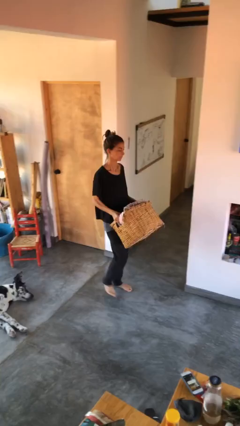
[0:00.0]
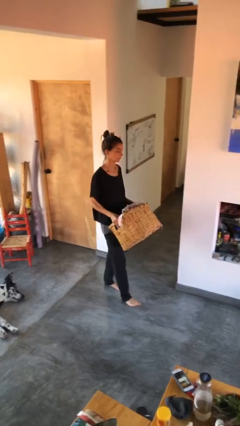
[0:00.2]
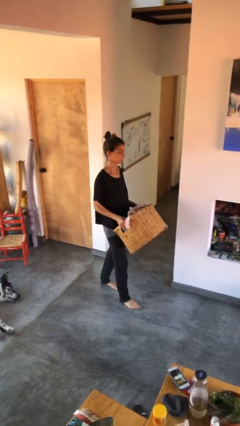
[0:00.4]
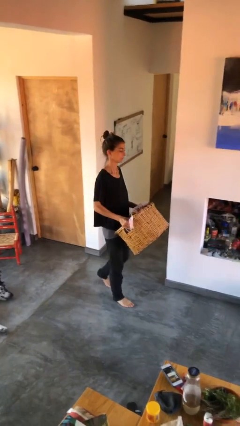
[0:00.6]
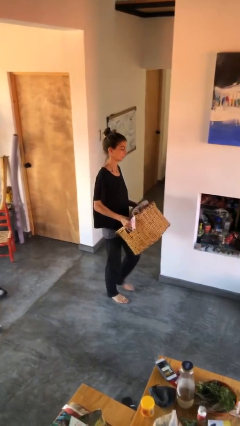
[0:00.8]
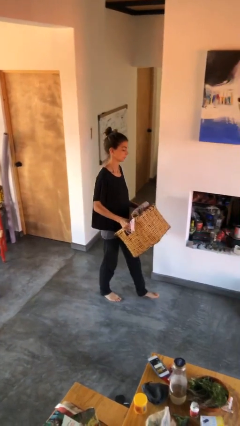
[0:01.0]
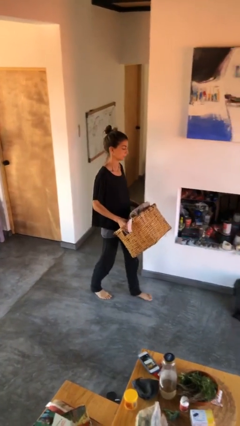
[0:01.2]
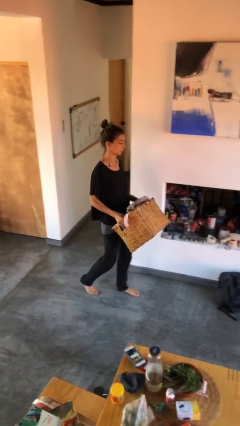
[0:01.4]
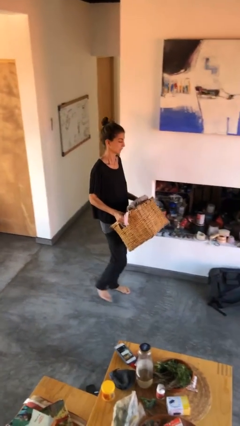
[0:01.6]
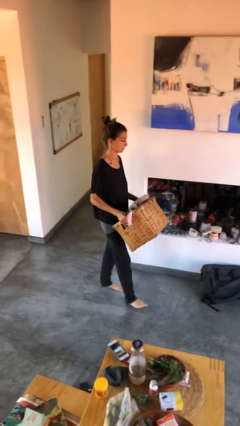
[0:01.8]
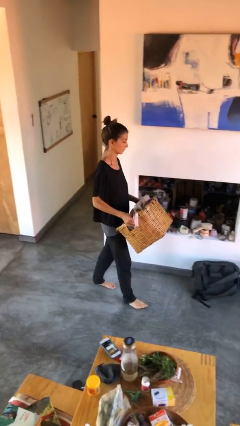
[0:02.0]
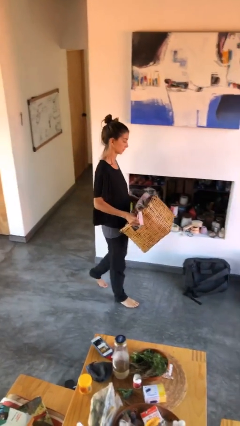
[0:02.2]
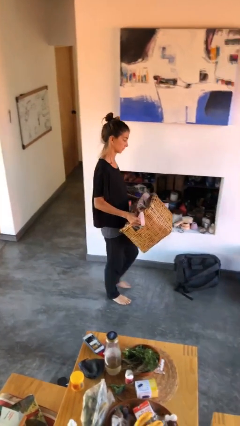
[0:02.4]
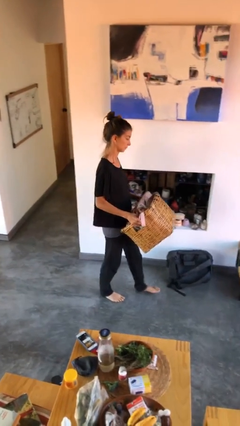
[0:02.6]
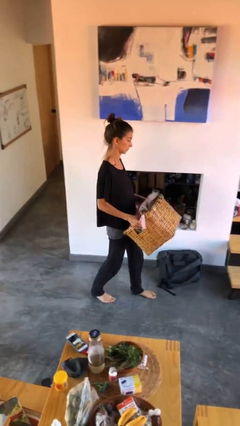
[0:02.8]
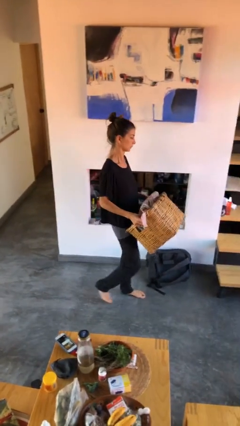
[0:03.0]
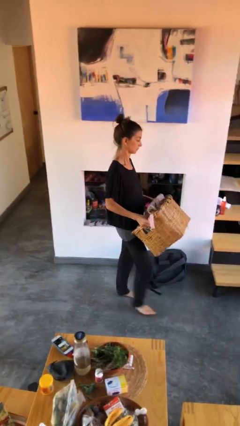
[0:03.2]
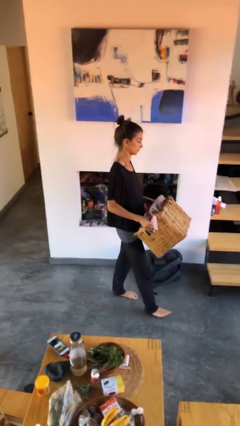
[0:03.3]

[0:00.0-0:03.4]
person carries laundry basket

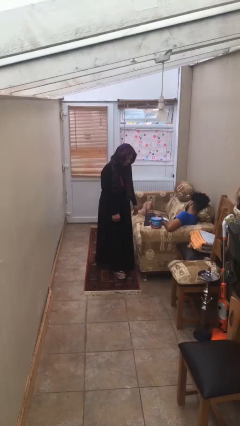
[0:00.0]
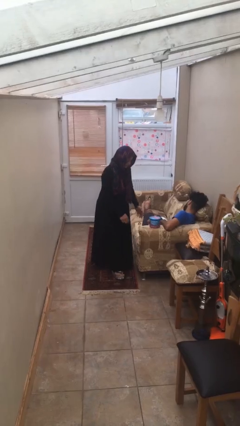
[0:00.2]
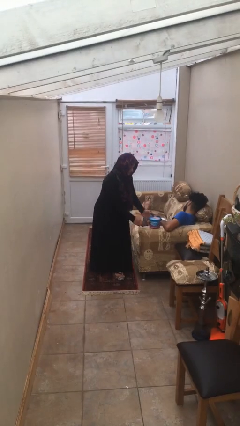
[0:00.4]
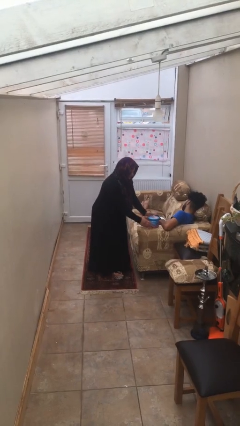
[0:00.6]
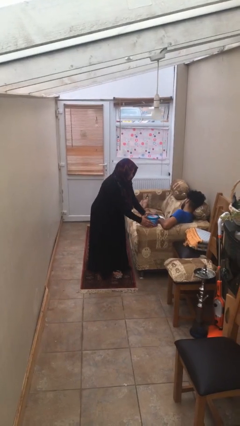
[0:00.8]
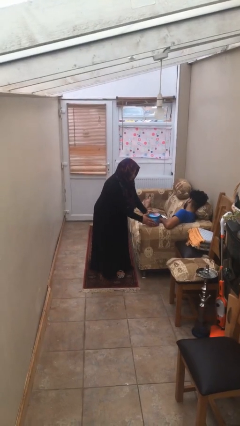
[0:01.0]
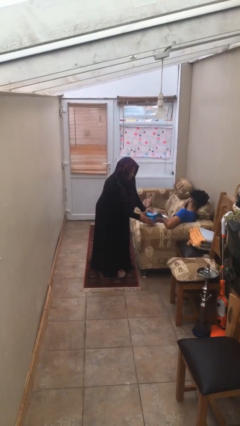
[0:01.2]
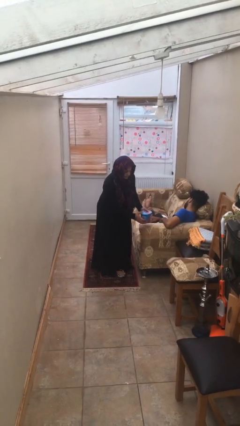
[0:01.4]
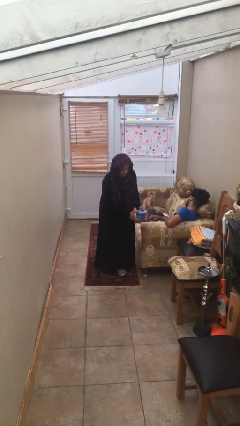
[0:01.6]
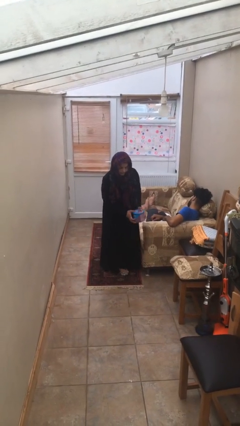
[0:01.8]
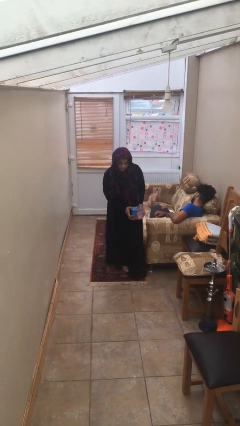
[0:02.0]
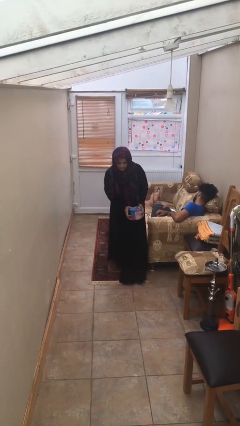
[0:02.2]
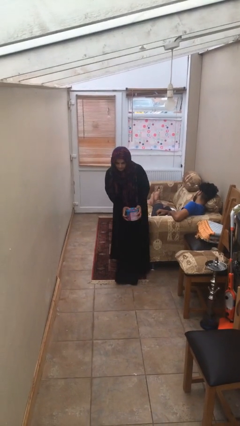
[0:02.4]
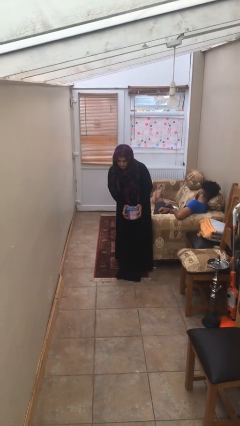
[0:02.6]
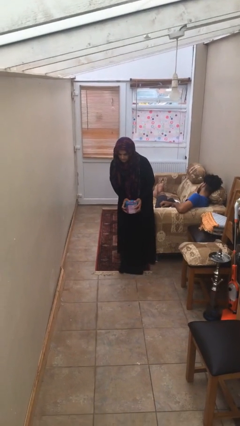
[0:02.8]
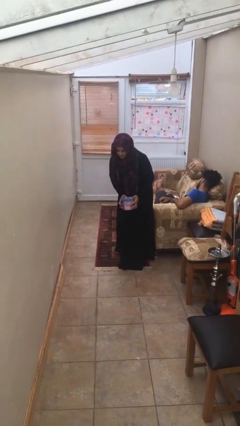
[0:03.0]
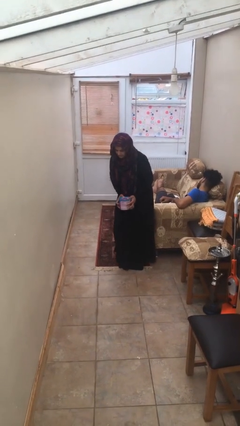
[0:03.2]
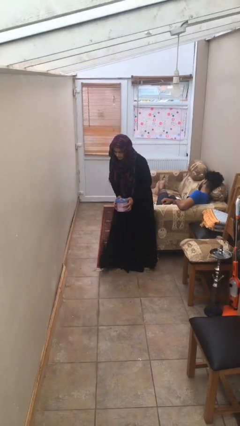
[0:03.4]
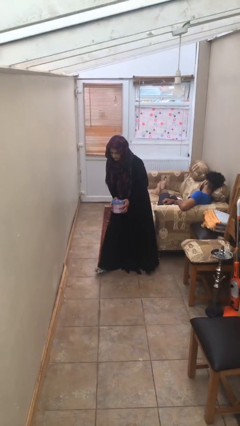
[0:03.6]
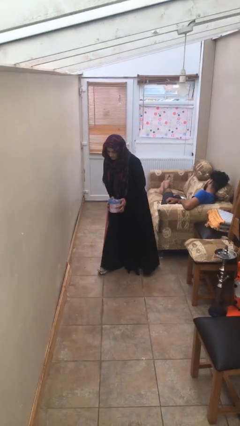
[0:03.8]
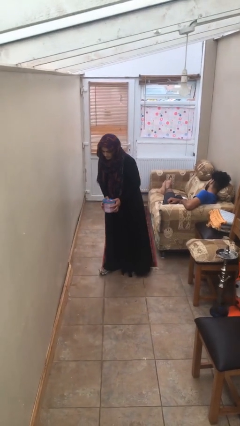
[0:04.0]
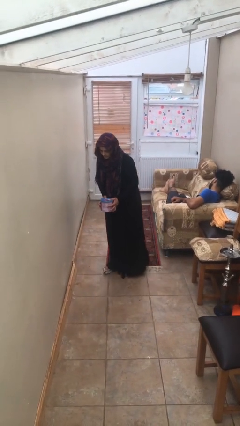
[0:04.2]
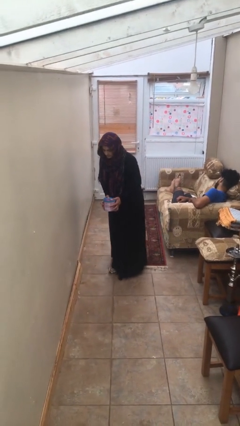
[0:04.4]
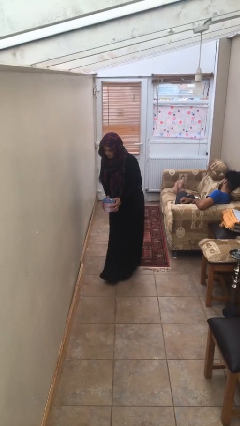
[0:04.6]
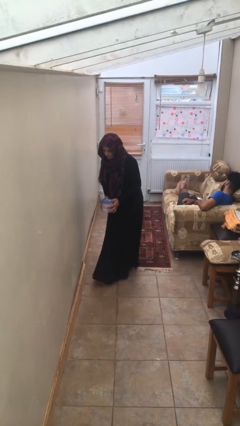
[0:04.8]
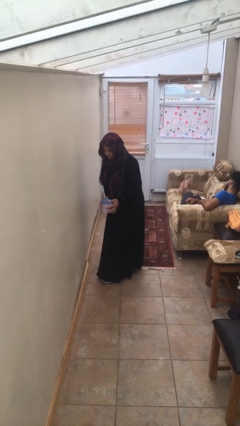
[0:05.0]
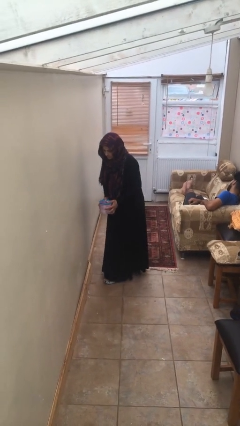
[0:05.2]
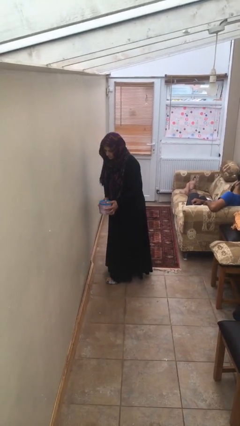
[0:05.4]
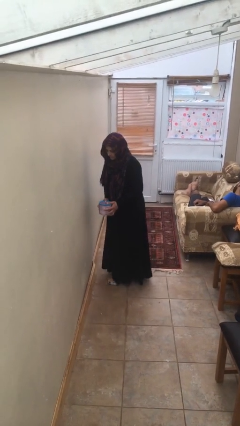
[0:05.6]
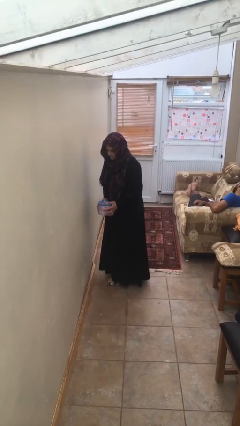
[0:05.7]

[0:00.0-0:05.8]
person steals object from person

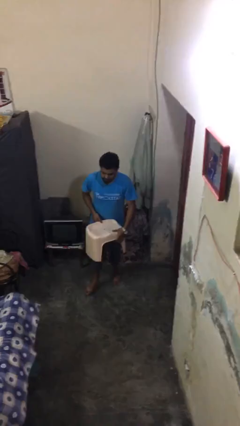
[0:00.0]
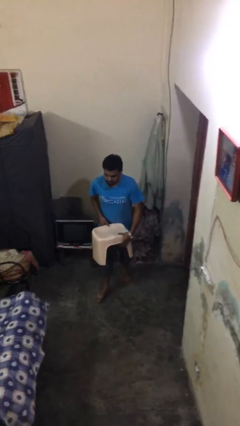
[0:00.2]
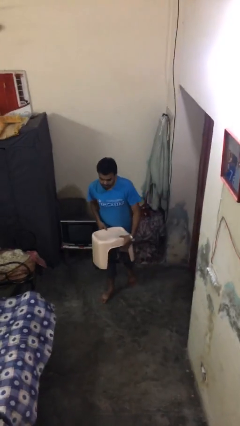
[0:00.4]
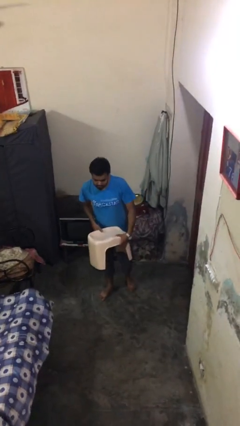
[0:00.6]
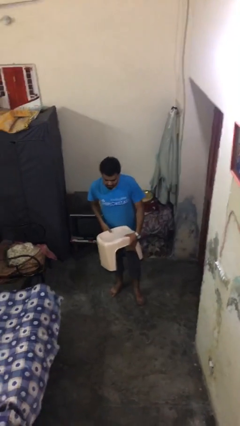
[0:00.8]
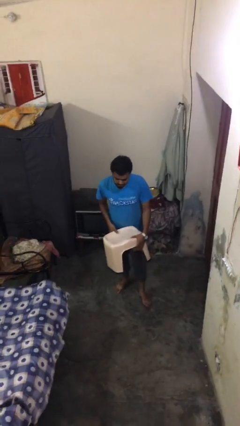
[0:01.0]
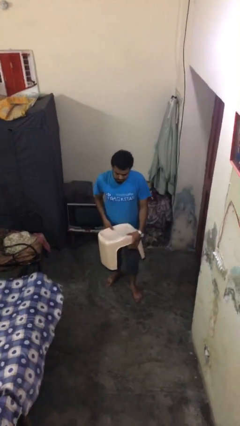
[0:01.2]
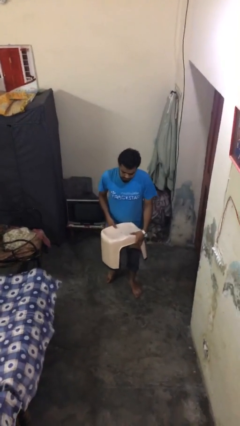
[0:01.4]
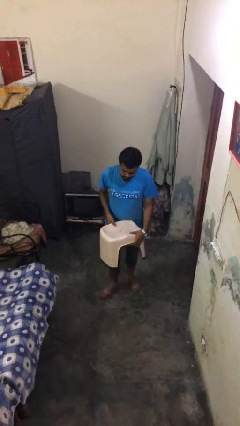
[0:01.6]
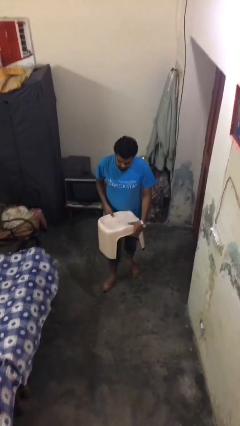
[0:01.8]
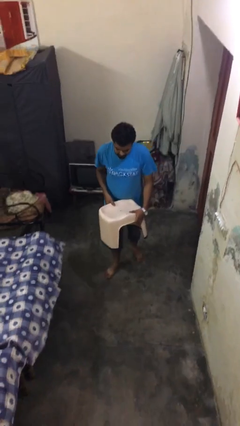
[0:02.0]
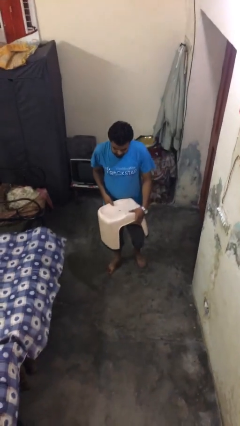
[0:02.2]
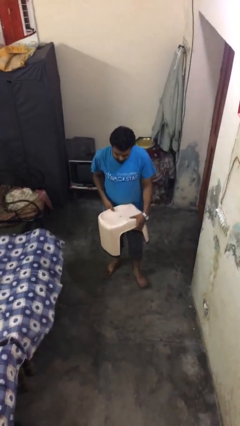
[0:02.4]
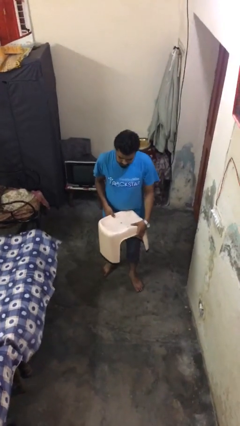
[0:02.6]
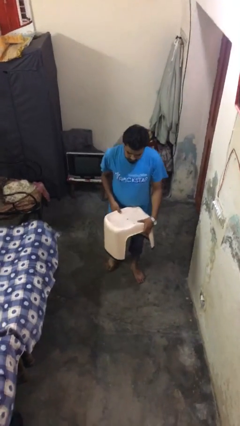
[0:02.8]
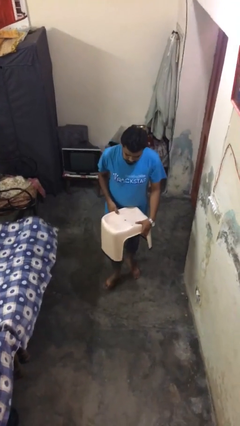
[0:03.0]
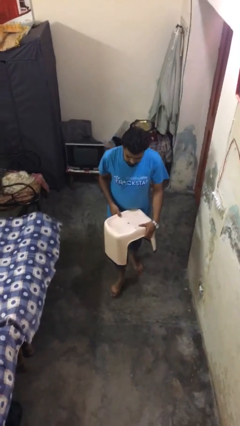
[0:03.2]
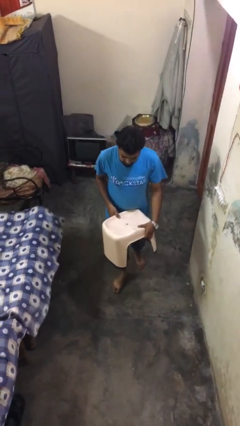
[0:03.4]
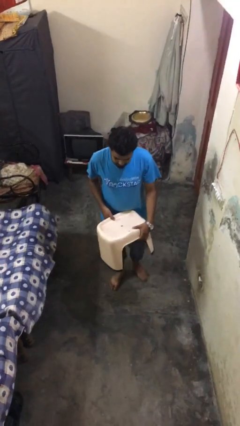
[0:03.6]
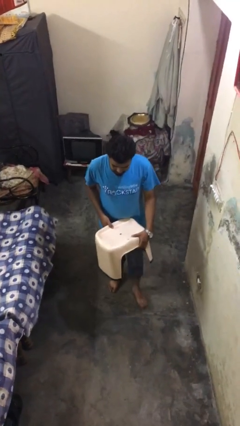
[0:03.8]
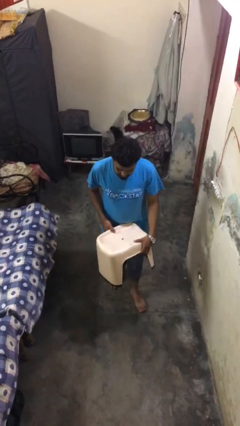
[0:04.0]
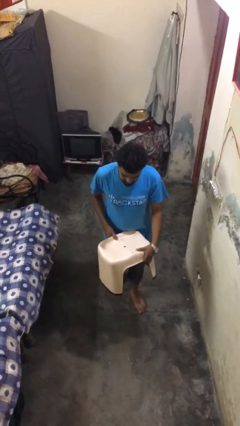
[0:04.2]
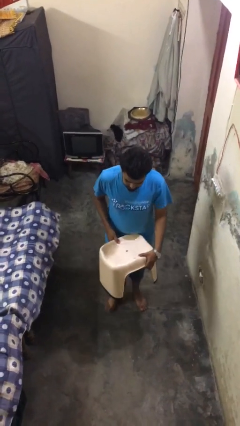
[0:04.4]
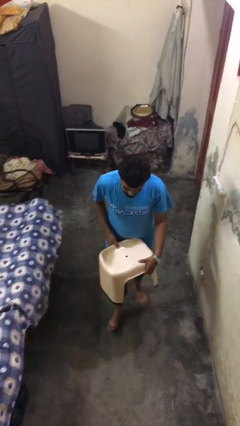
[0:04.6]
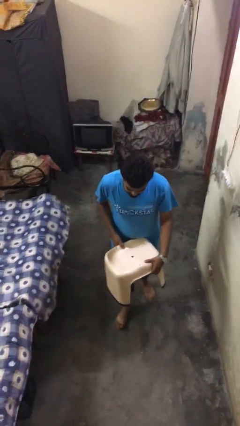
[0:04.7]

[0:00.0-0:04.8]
person carries heavy object

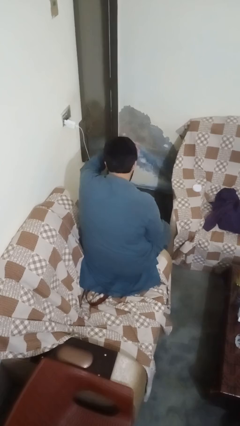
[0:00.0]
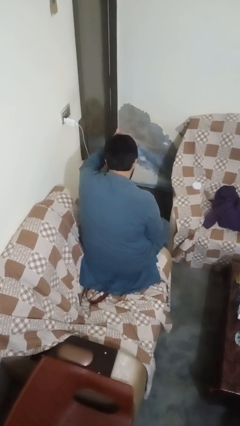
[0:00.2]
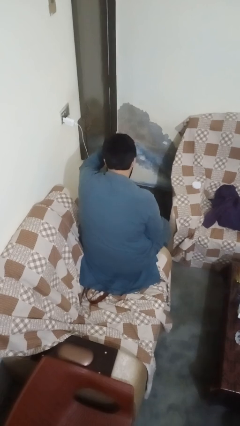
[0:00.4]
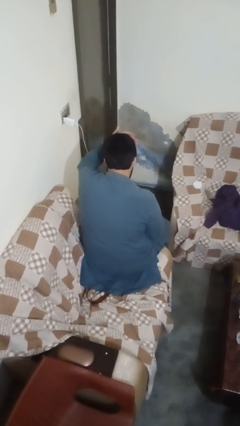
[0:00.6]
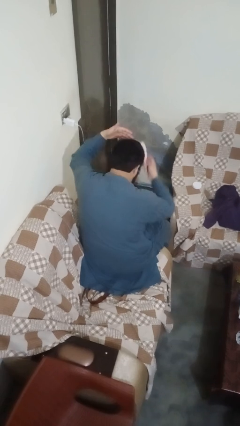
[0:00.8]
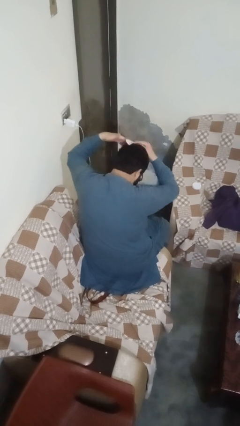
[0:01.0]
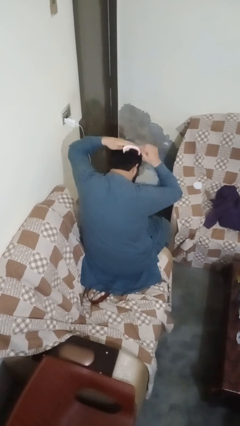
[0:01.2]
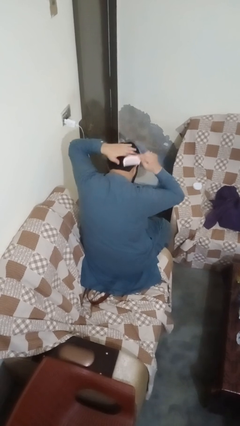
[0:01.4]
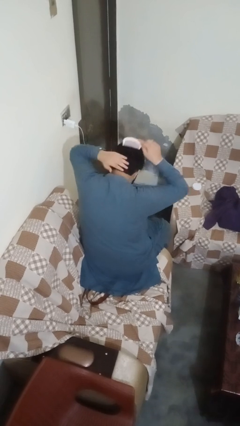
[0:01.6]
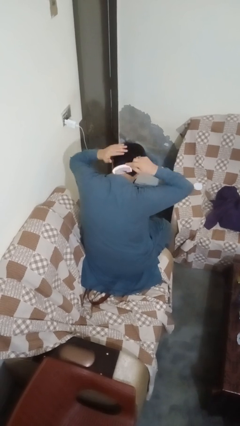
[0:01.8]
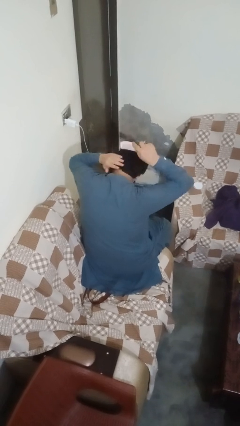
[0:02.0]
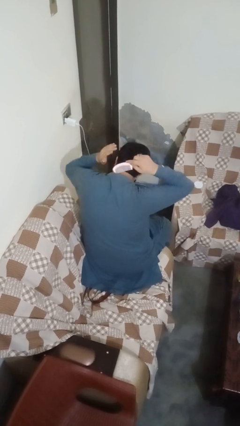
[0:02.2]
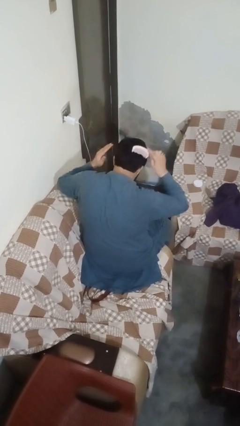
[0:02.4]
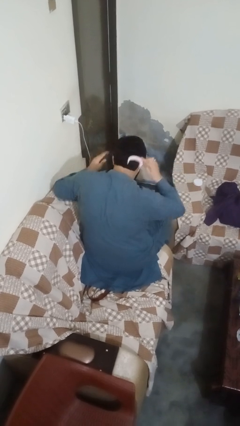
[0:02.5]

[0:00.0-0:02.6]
person brushes hair

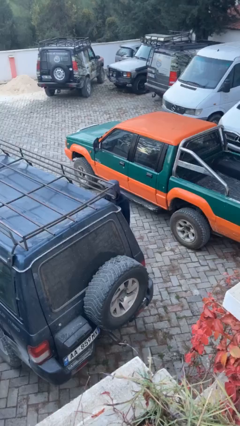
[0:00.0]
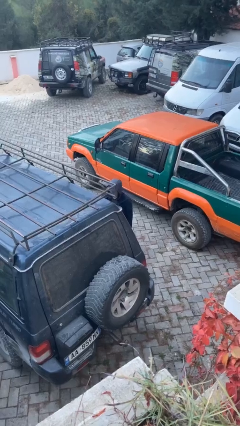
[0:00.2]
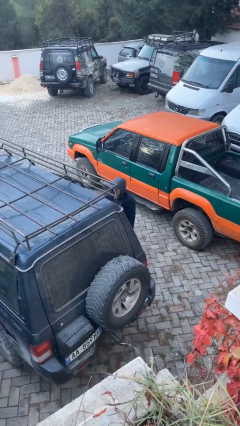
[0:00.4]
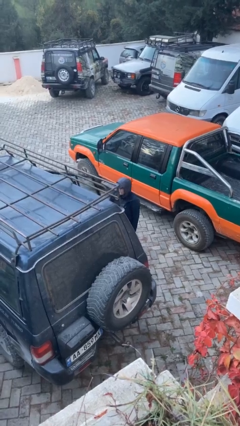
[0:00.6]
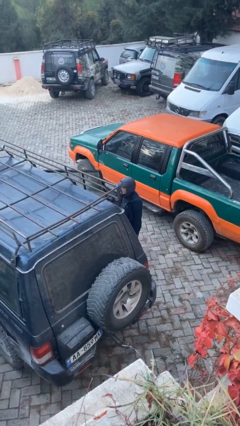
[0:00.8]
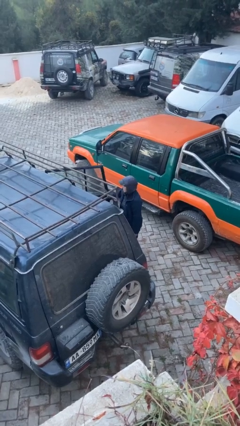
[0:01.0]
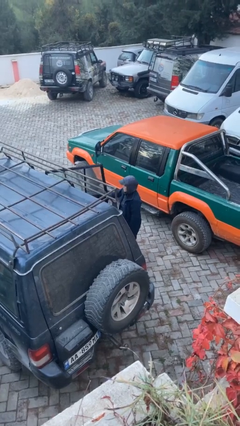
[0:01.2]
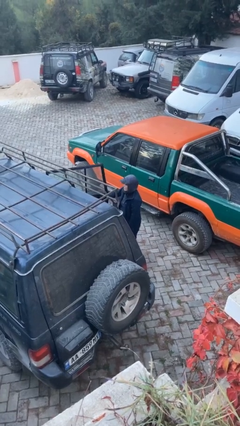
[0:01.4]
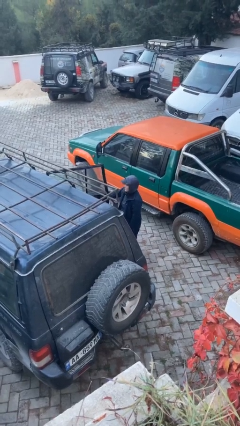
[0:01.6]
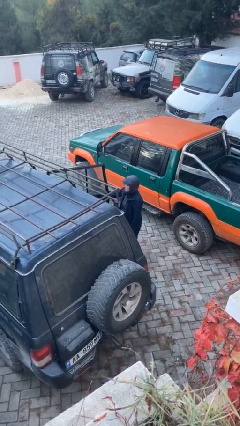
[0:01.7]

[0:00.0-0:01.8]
person opens car door
